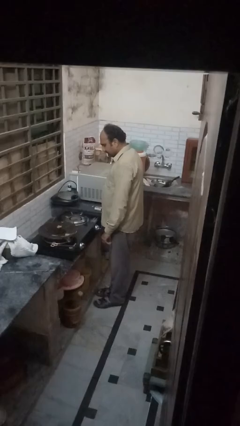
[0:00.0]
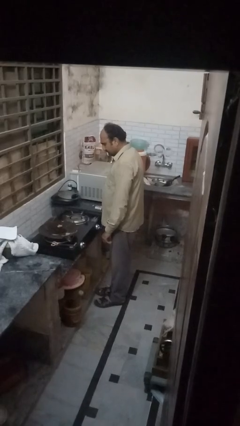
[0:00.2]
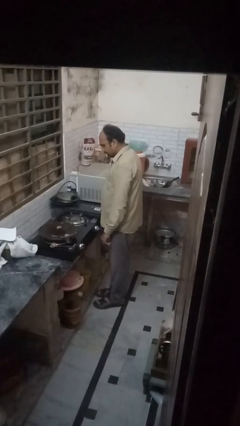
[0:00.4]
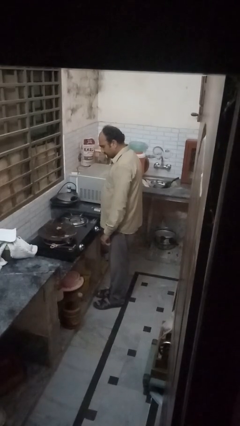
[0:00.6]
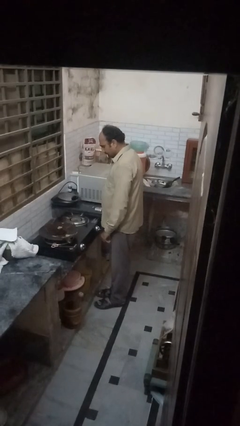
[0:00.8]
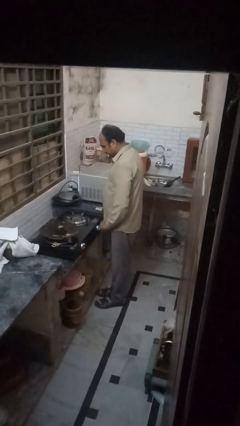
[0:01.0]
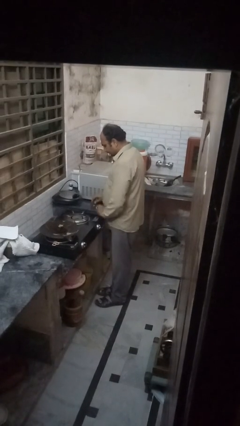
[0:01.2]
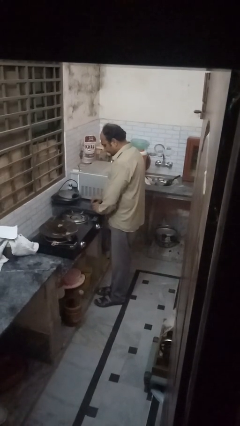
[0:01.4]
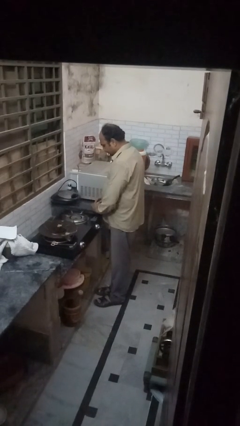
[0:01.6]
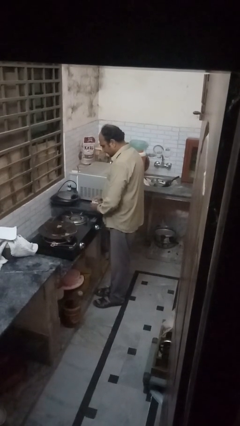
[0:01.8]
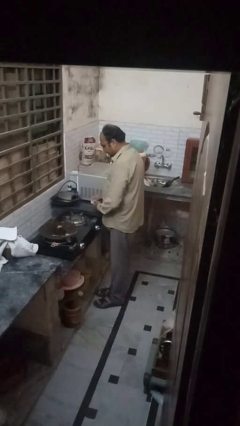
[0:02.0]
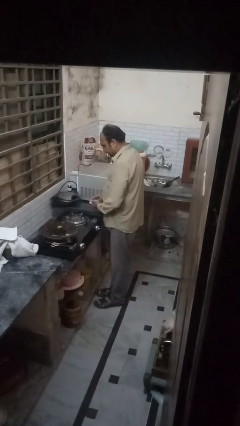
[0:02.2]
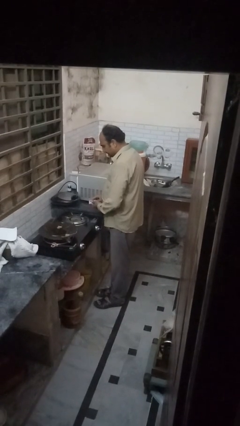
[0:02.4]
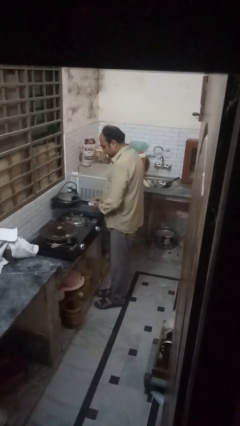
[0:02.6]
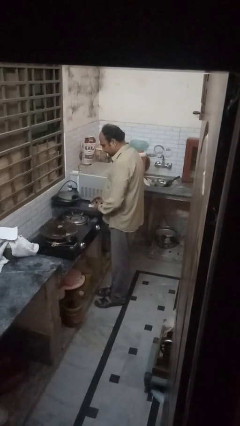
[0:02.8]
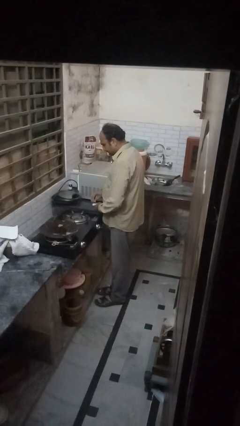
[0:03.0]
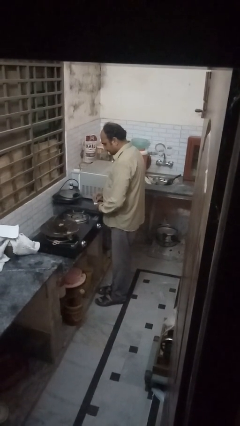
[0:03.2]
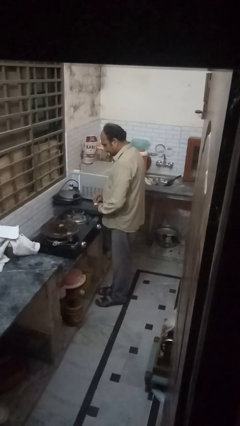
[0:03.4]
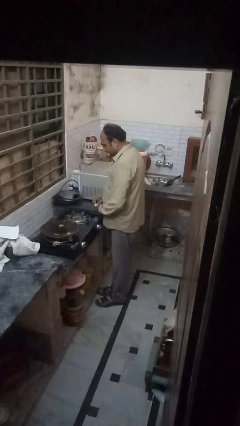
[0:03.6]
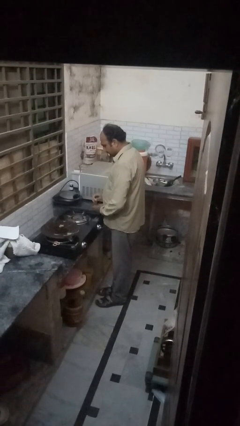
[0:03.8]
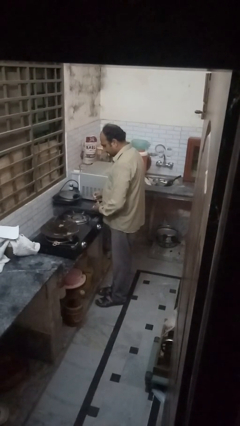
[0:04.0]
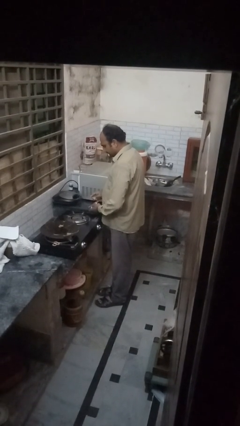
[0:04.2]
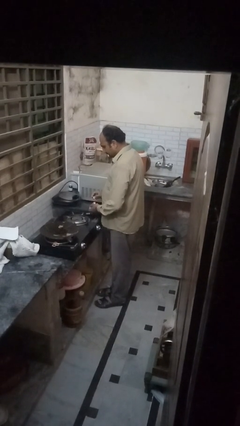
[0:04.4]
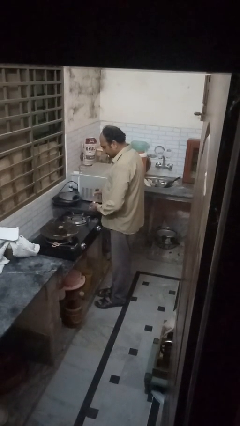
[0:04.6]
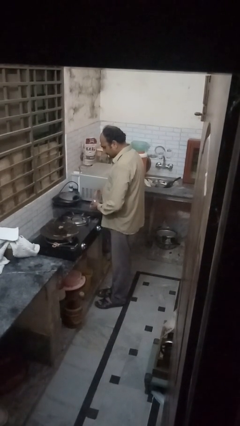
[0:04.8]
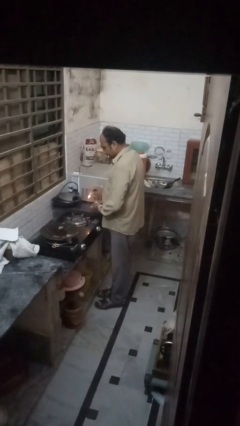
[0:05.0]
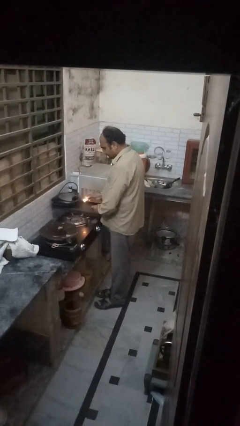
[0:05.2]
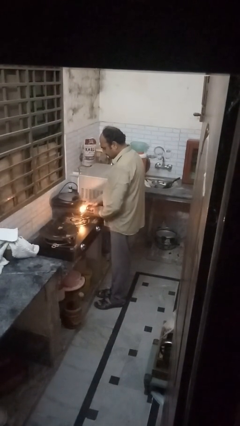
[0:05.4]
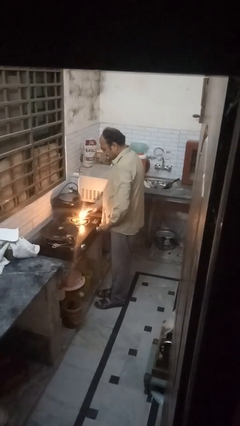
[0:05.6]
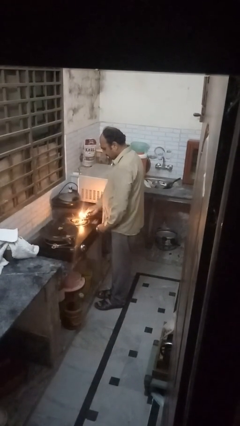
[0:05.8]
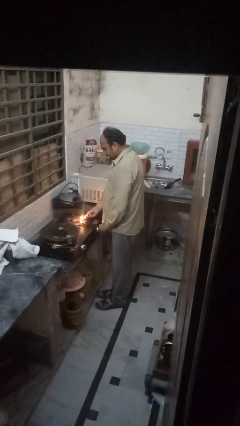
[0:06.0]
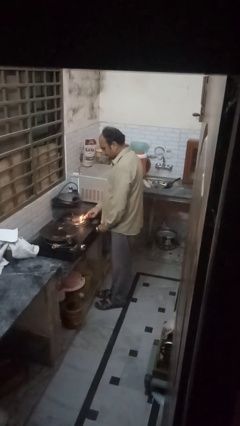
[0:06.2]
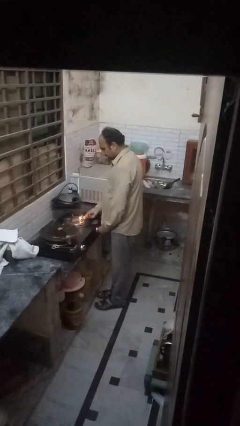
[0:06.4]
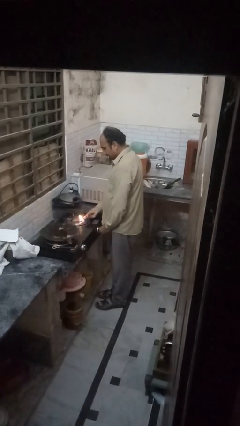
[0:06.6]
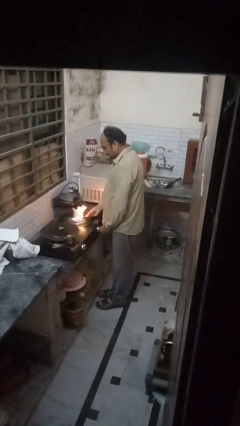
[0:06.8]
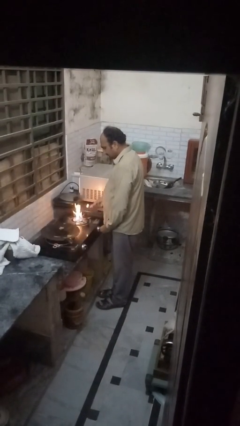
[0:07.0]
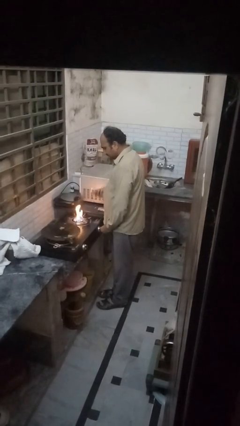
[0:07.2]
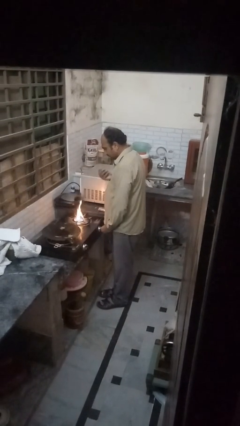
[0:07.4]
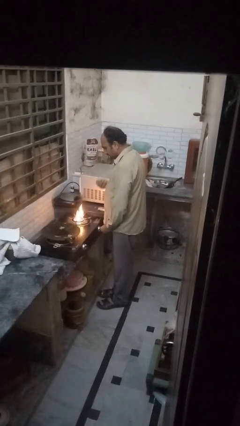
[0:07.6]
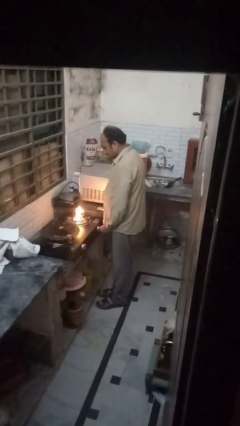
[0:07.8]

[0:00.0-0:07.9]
person turns on stovetop

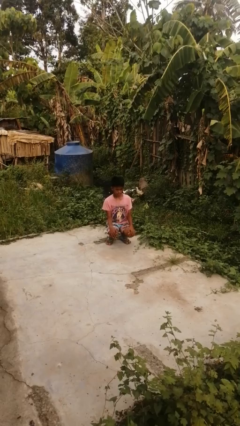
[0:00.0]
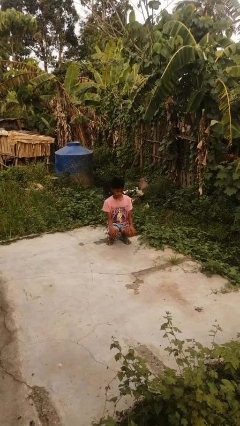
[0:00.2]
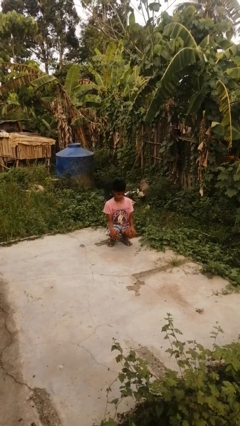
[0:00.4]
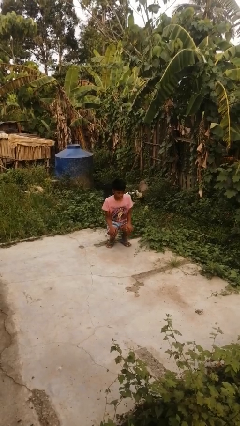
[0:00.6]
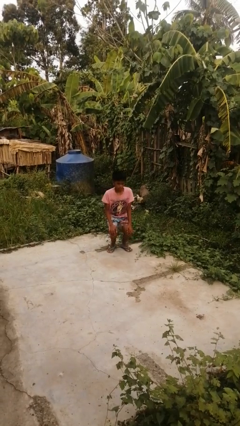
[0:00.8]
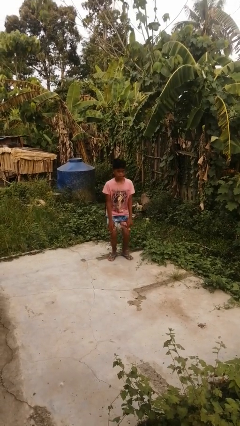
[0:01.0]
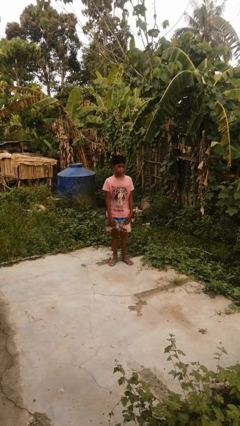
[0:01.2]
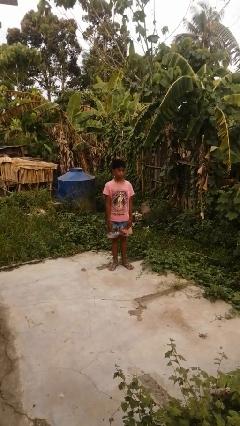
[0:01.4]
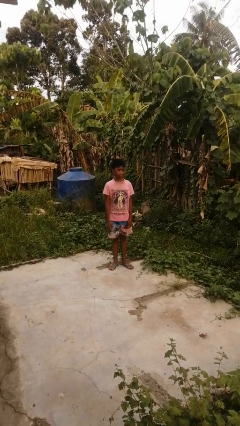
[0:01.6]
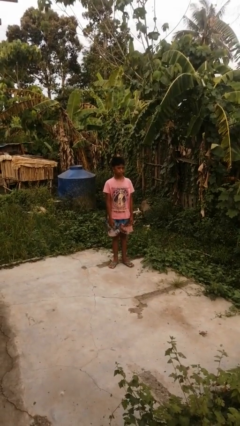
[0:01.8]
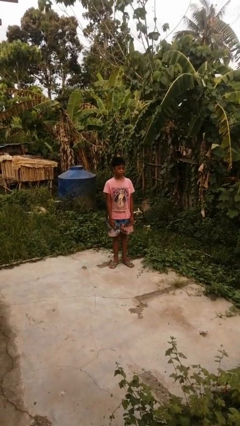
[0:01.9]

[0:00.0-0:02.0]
person stands up

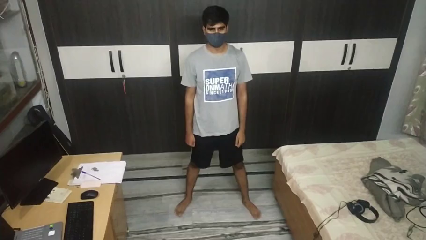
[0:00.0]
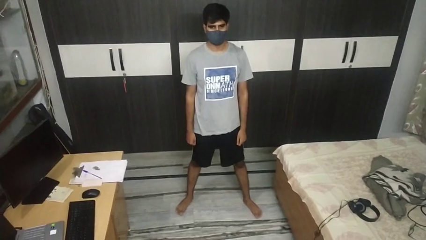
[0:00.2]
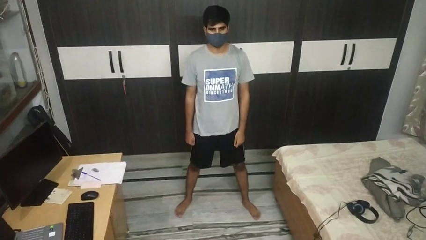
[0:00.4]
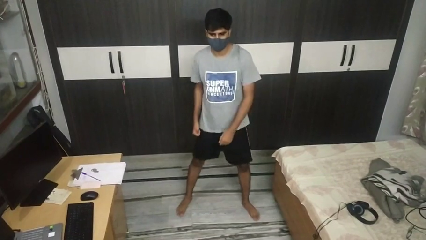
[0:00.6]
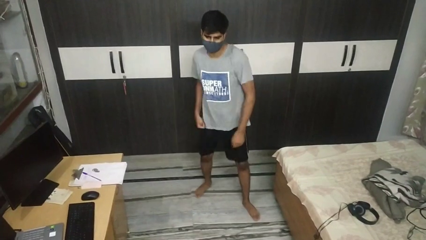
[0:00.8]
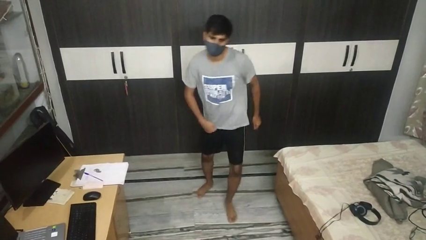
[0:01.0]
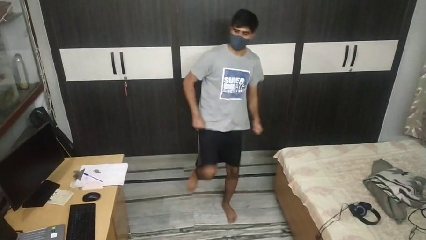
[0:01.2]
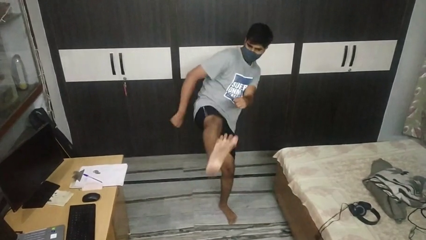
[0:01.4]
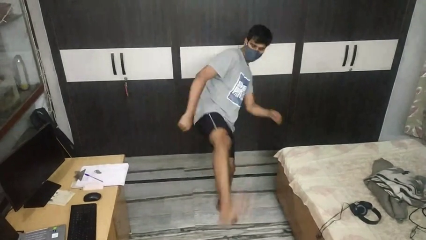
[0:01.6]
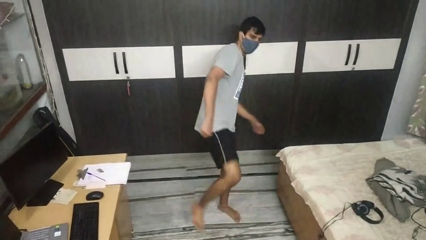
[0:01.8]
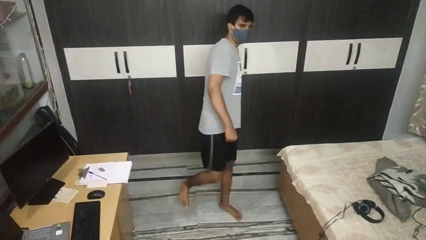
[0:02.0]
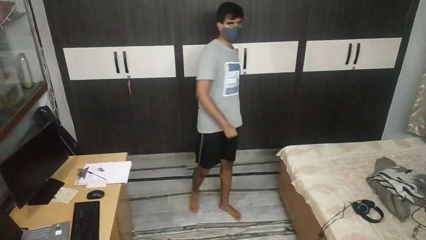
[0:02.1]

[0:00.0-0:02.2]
person karate kicks

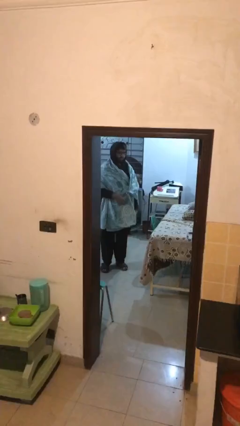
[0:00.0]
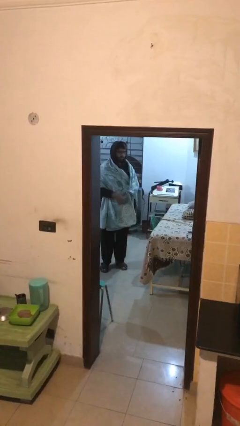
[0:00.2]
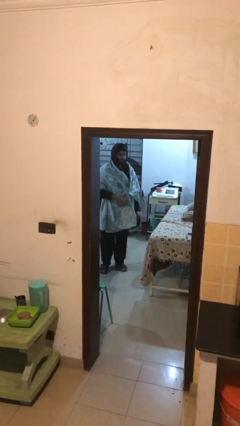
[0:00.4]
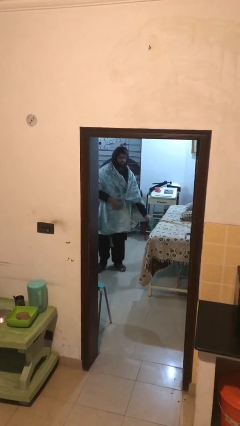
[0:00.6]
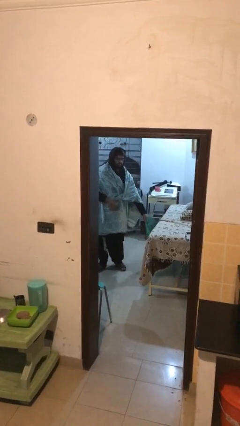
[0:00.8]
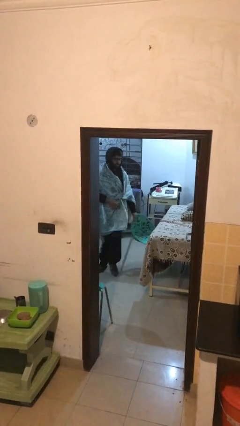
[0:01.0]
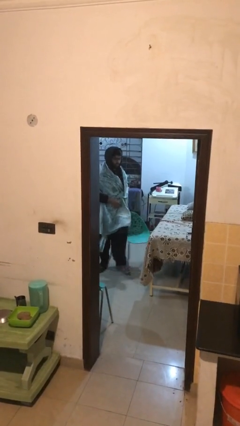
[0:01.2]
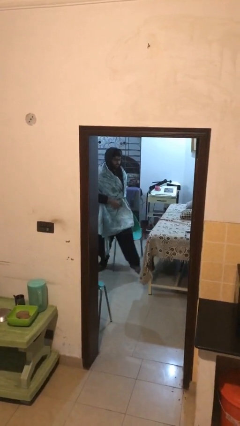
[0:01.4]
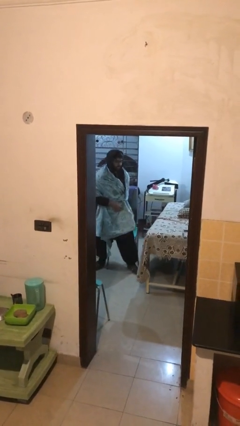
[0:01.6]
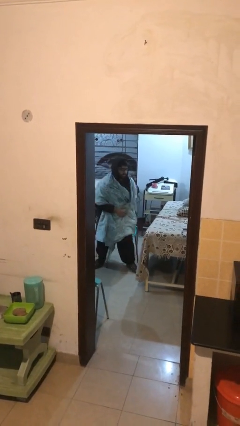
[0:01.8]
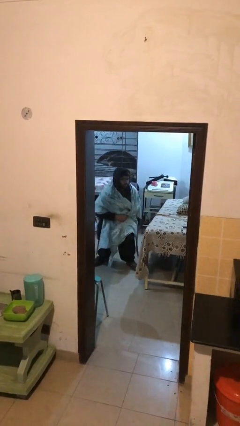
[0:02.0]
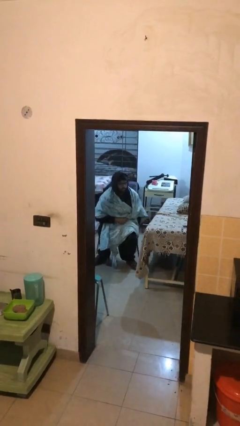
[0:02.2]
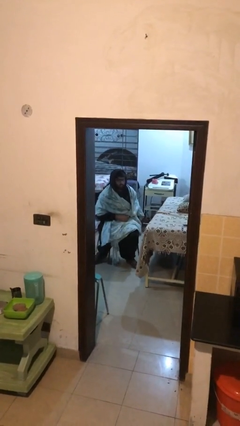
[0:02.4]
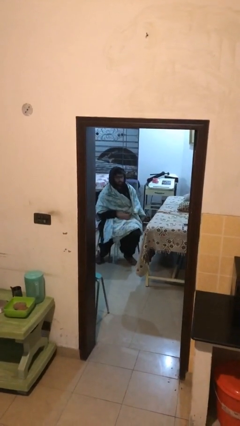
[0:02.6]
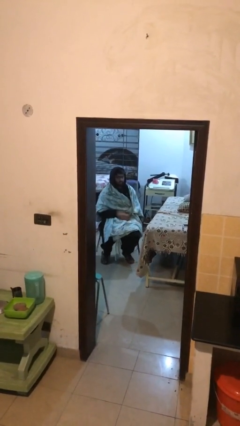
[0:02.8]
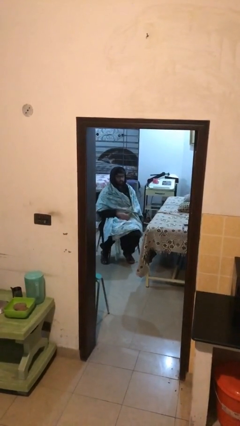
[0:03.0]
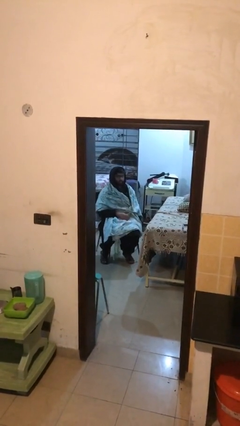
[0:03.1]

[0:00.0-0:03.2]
person sits down

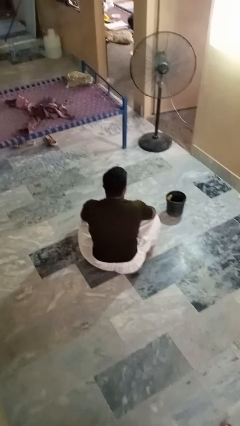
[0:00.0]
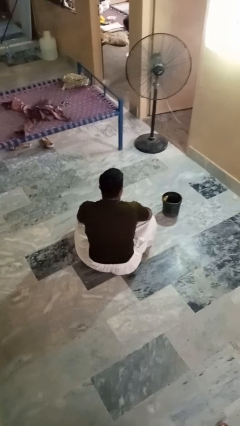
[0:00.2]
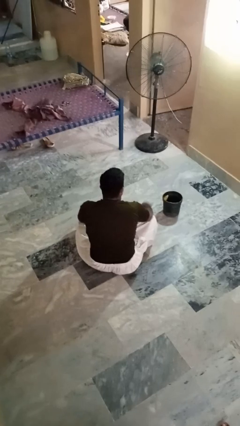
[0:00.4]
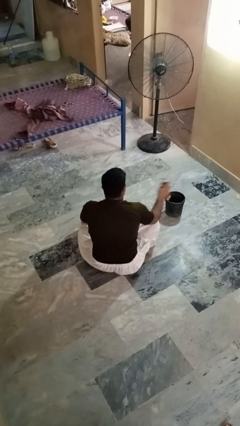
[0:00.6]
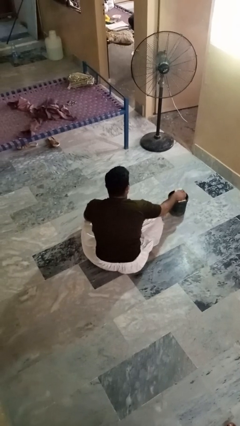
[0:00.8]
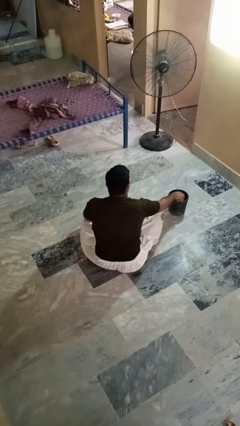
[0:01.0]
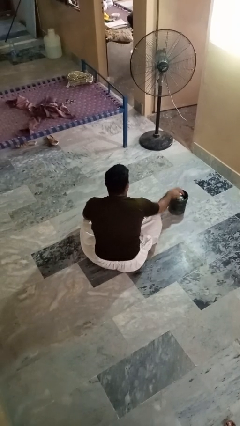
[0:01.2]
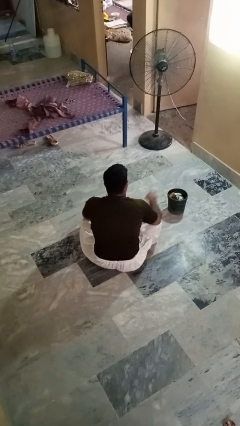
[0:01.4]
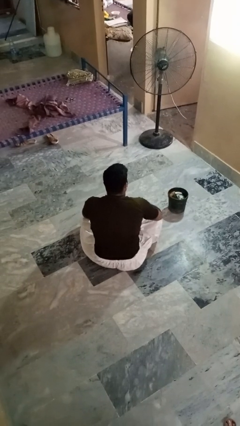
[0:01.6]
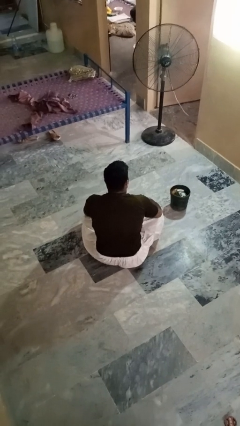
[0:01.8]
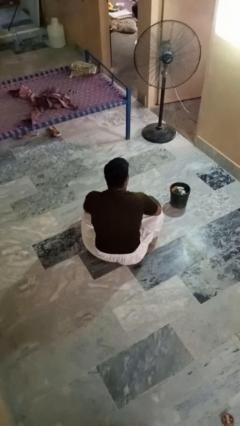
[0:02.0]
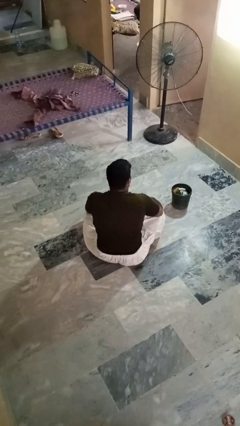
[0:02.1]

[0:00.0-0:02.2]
person puts object into basket

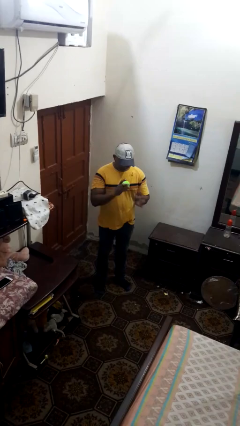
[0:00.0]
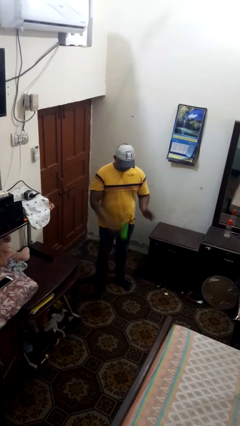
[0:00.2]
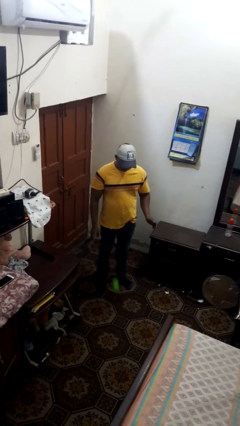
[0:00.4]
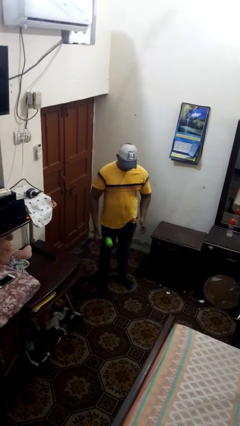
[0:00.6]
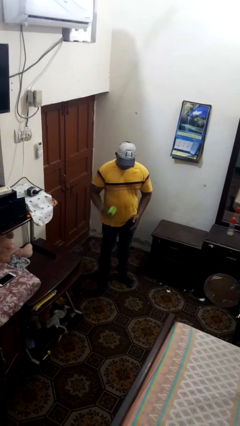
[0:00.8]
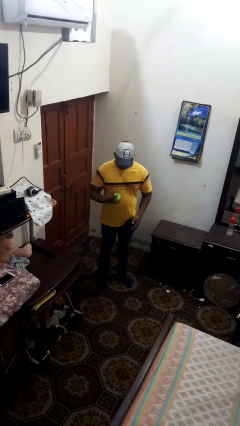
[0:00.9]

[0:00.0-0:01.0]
person bounces ball on floor
